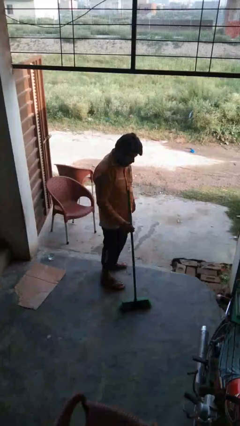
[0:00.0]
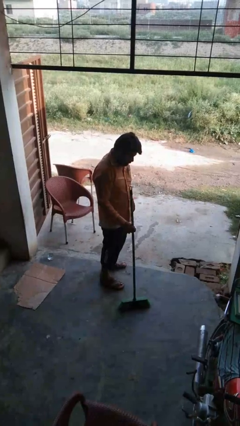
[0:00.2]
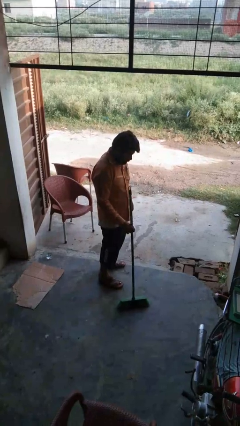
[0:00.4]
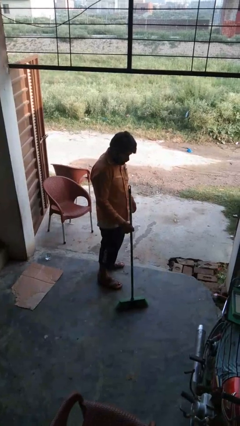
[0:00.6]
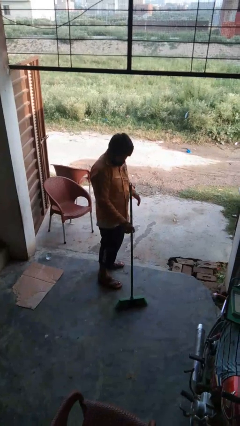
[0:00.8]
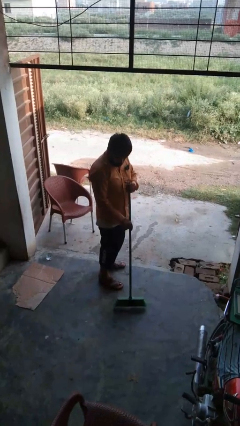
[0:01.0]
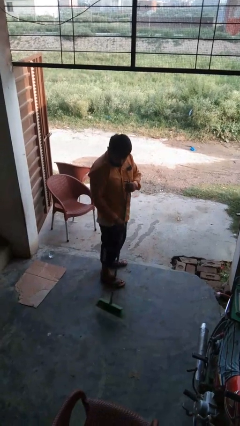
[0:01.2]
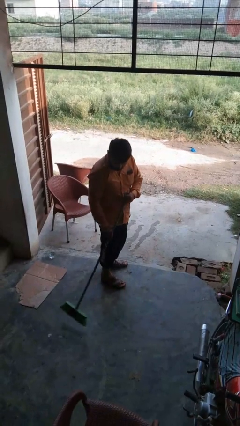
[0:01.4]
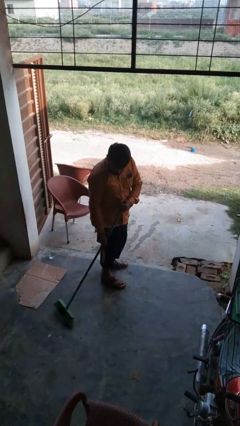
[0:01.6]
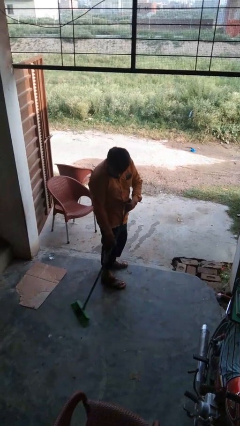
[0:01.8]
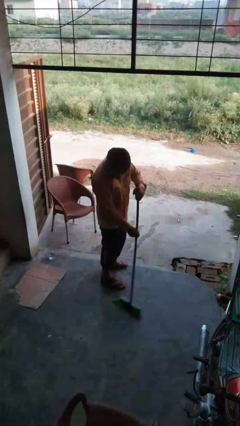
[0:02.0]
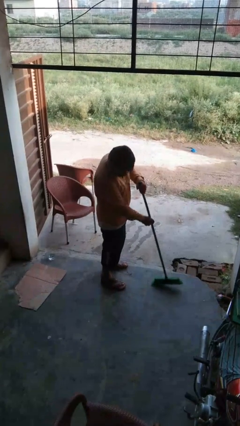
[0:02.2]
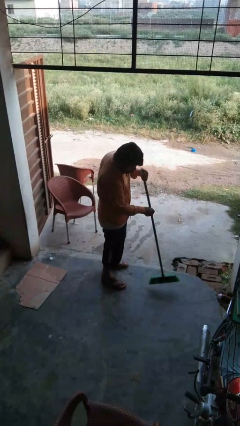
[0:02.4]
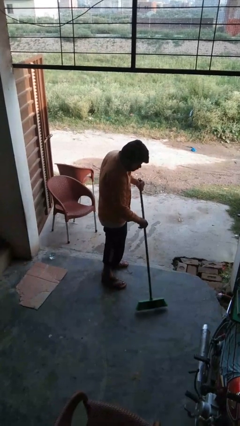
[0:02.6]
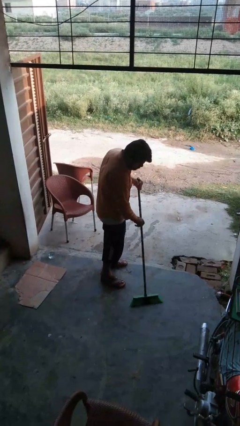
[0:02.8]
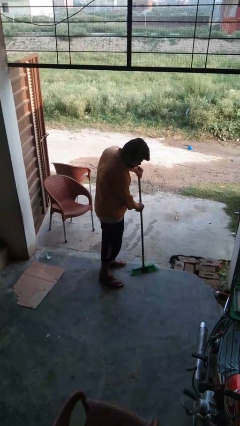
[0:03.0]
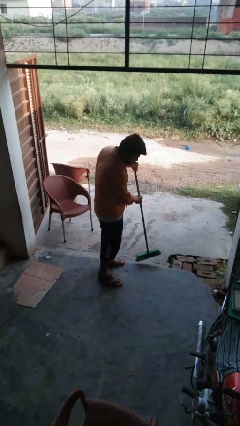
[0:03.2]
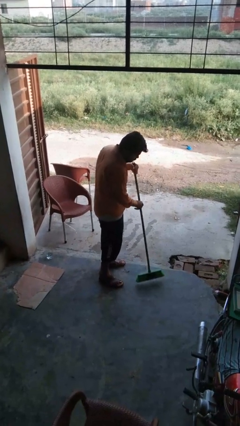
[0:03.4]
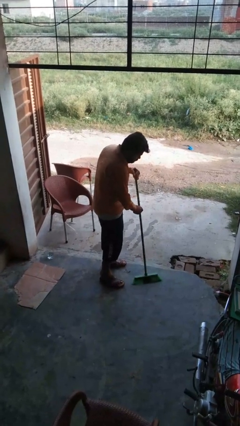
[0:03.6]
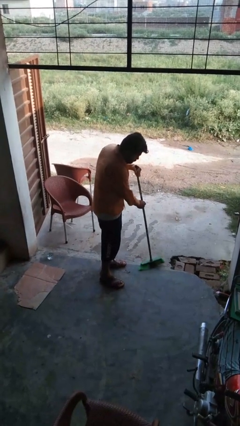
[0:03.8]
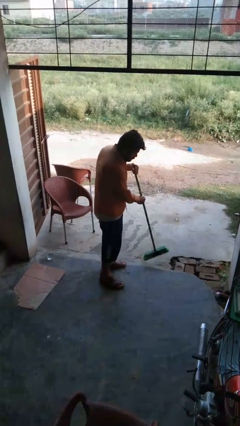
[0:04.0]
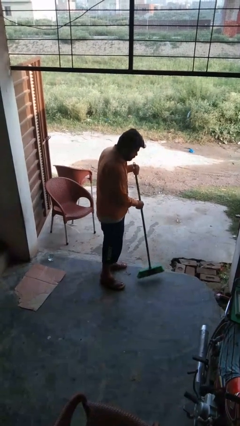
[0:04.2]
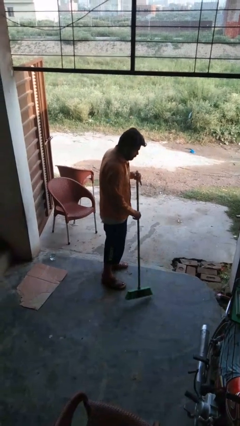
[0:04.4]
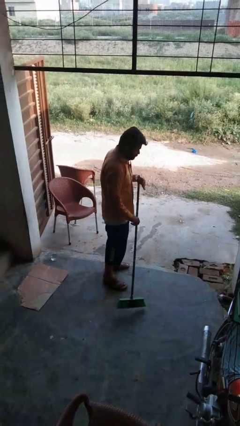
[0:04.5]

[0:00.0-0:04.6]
person mops

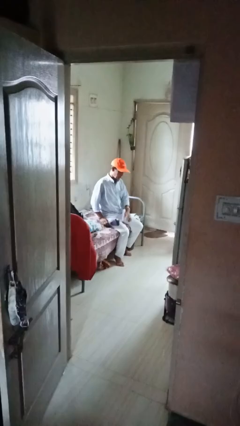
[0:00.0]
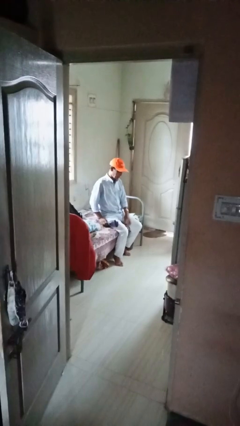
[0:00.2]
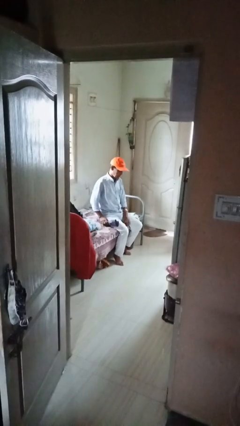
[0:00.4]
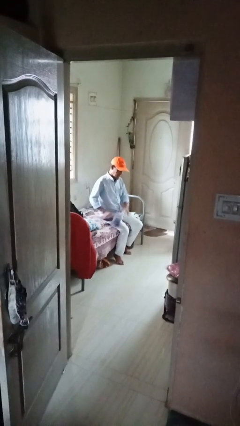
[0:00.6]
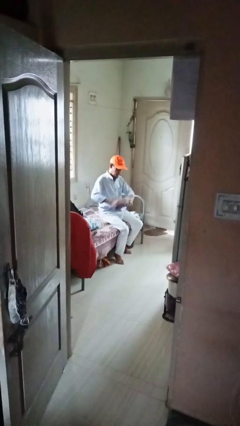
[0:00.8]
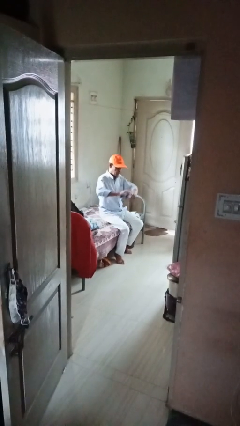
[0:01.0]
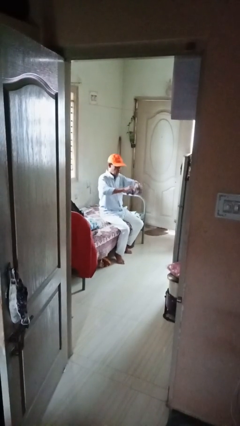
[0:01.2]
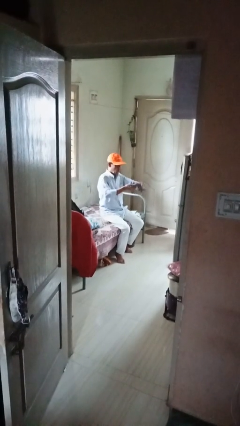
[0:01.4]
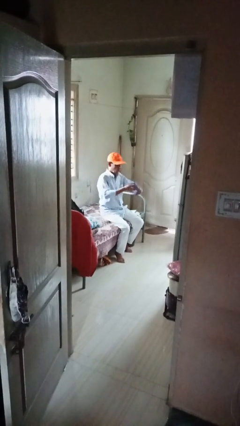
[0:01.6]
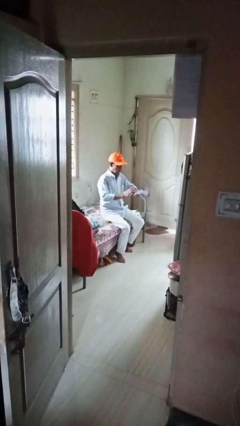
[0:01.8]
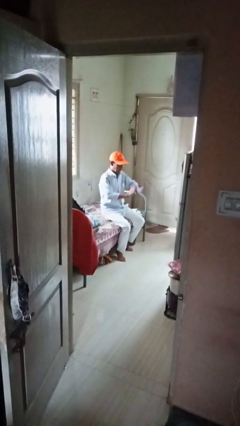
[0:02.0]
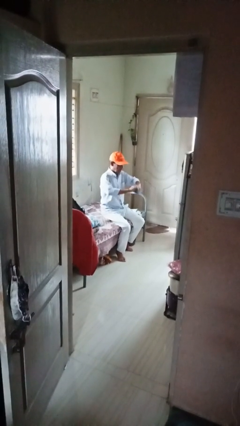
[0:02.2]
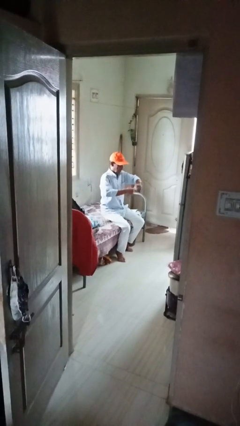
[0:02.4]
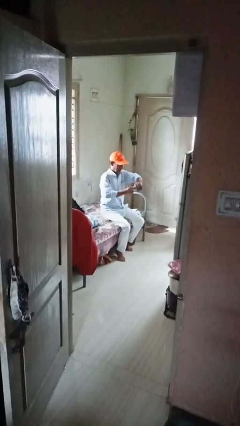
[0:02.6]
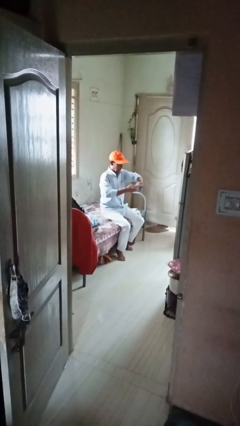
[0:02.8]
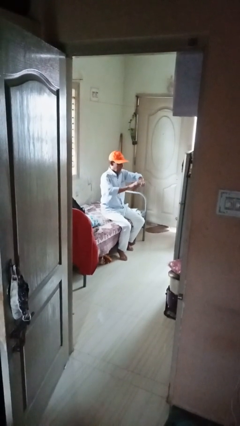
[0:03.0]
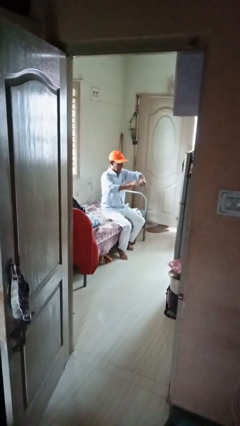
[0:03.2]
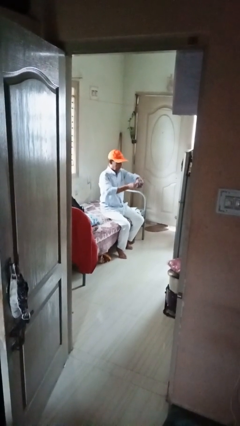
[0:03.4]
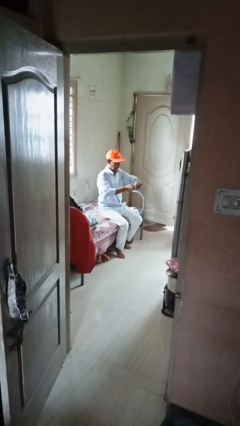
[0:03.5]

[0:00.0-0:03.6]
person squeezes object

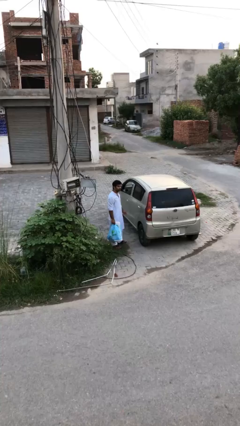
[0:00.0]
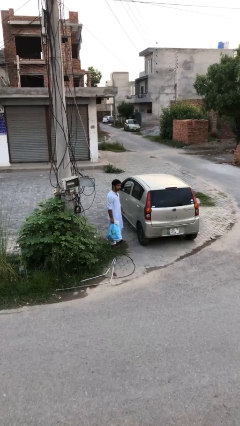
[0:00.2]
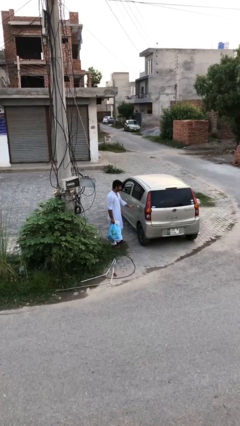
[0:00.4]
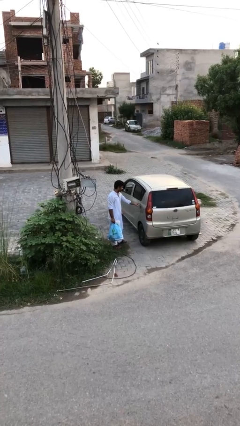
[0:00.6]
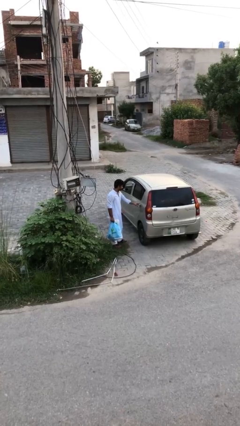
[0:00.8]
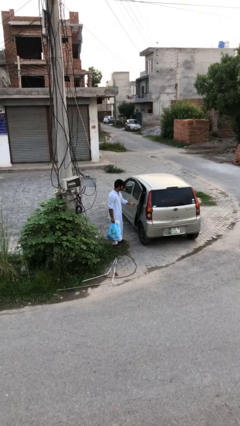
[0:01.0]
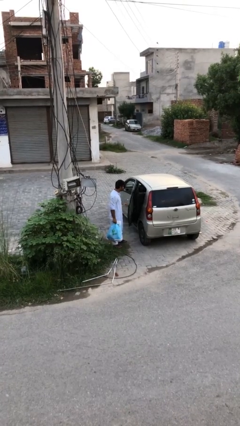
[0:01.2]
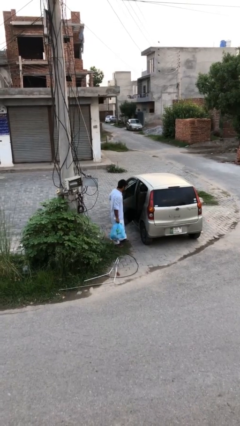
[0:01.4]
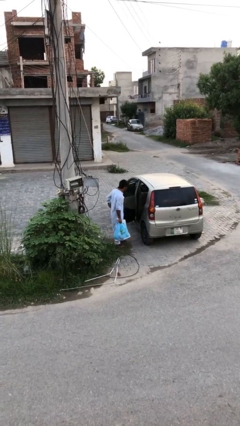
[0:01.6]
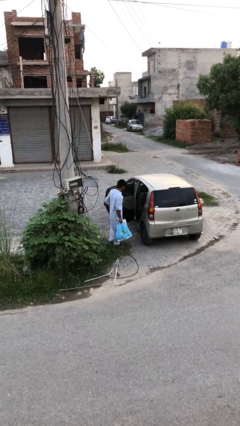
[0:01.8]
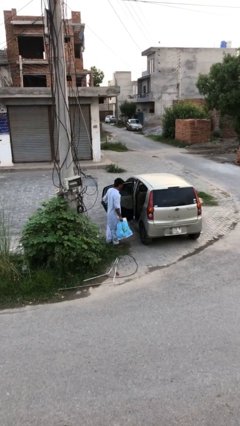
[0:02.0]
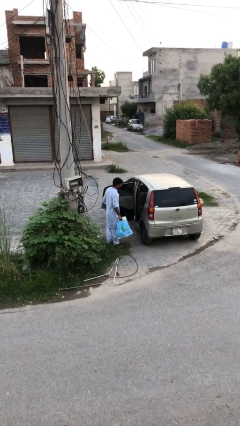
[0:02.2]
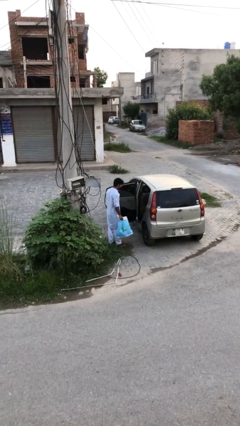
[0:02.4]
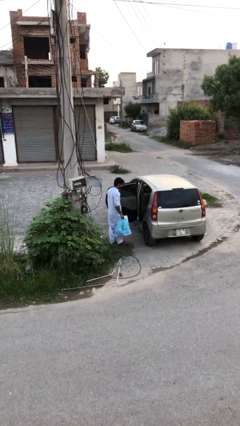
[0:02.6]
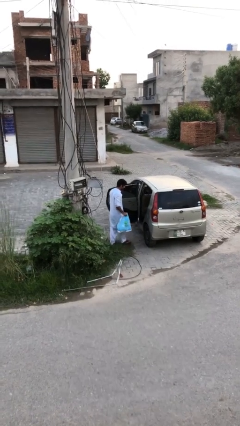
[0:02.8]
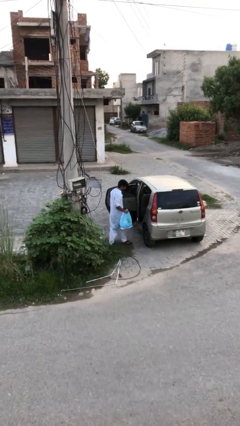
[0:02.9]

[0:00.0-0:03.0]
person opens car door

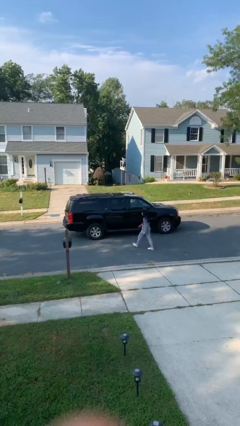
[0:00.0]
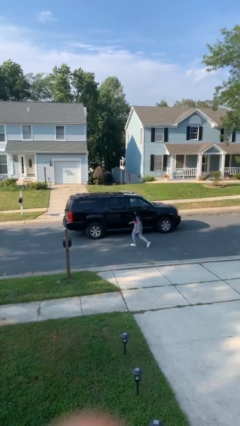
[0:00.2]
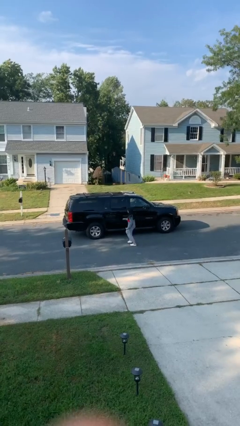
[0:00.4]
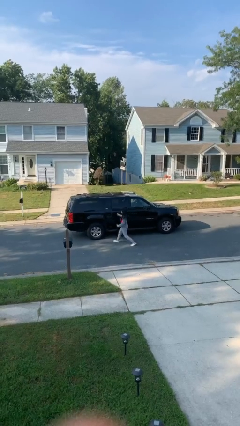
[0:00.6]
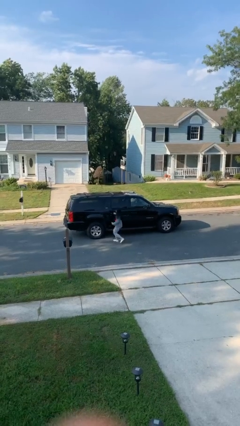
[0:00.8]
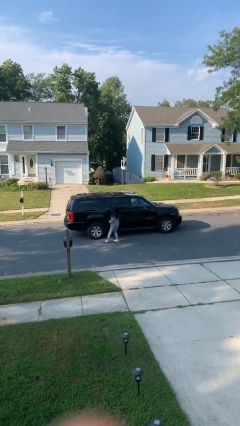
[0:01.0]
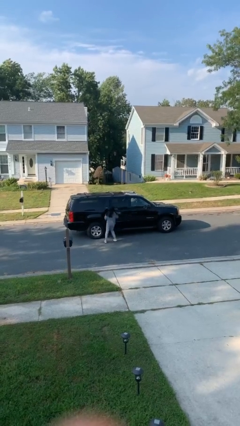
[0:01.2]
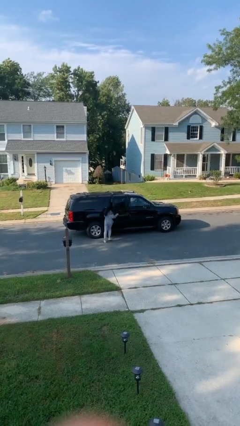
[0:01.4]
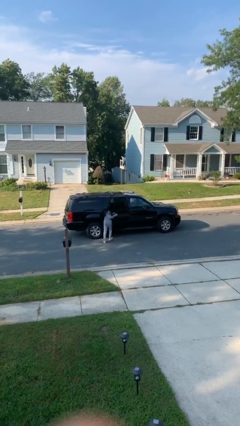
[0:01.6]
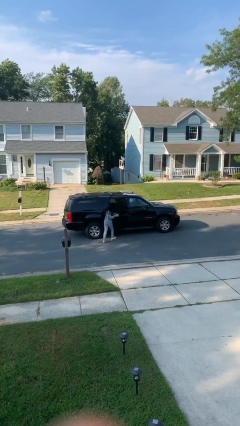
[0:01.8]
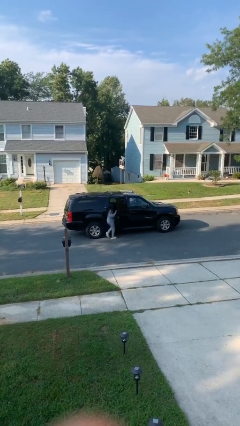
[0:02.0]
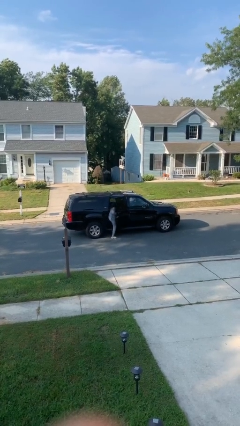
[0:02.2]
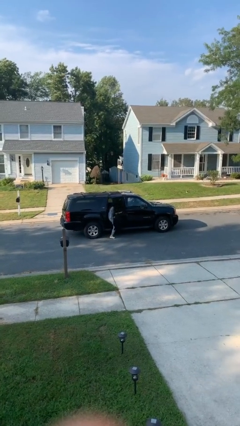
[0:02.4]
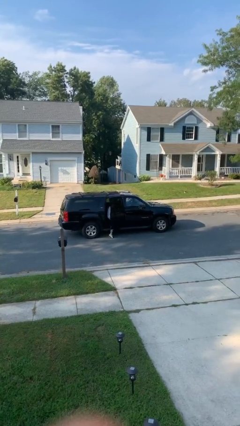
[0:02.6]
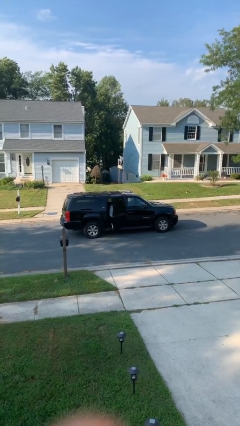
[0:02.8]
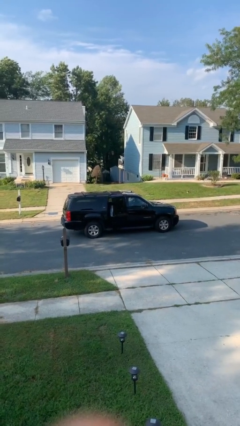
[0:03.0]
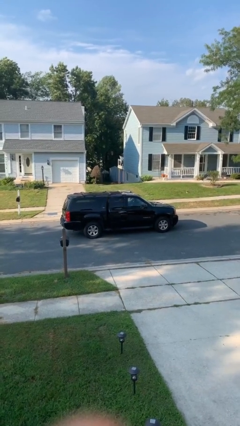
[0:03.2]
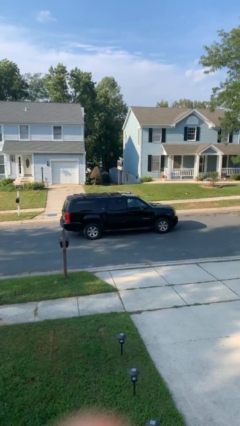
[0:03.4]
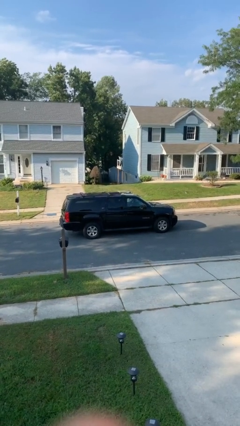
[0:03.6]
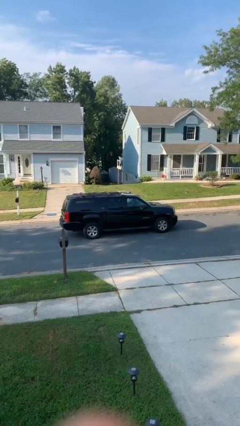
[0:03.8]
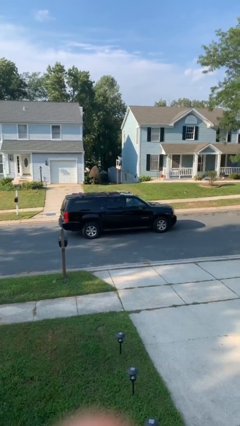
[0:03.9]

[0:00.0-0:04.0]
car picks up person

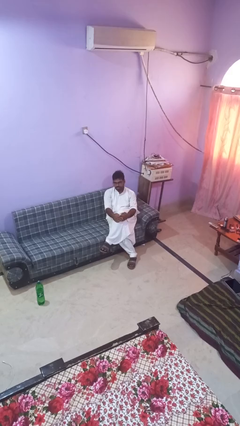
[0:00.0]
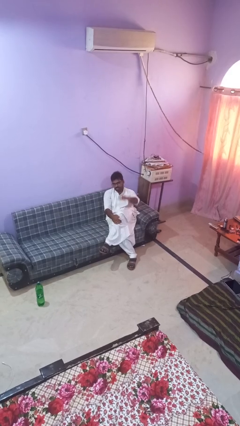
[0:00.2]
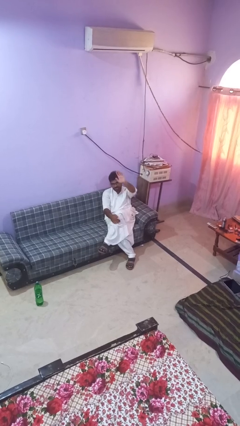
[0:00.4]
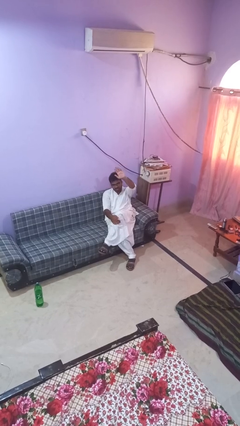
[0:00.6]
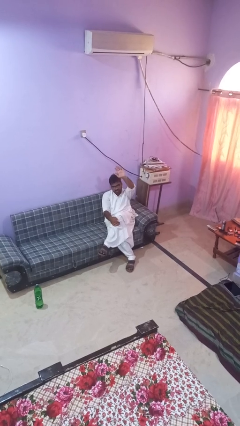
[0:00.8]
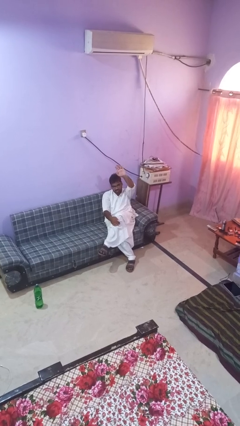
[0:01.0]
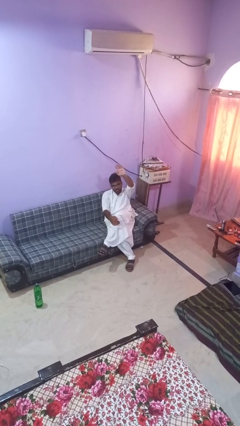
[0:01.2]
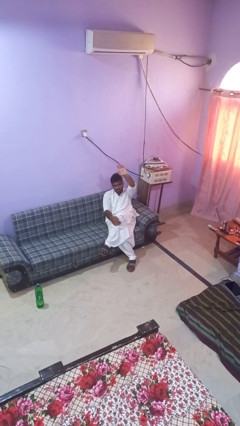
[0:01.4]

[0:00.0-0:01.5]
person gestures raise hand

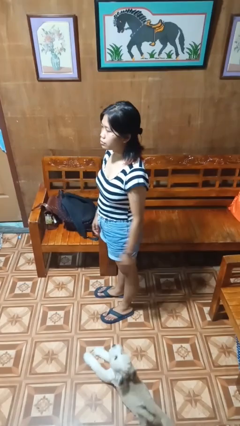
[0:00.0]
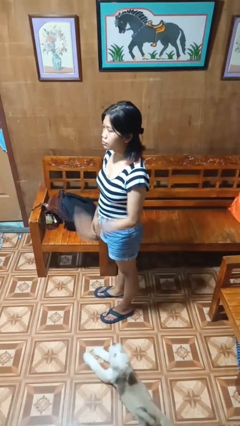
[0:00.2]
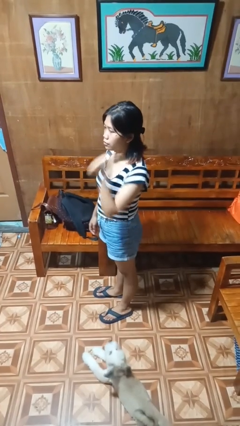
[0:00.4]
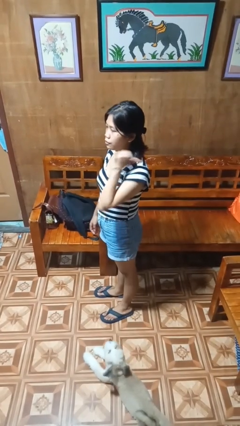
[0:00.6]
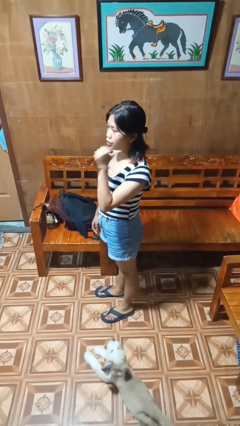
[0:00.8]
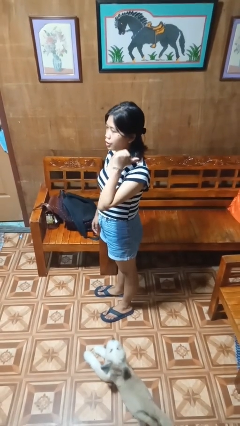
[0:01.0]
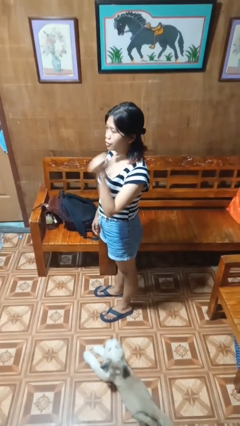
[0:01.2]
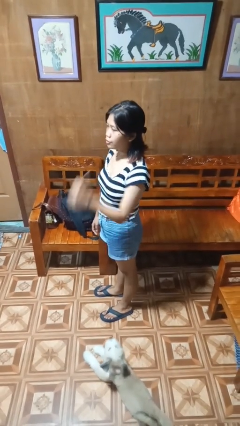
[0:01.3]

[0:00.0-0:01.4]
person gestures behind me
